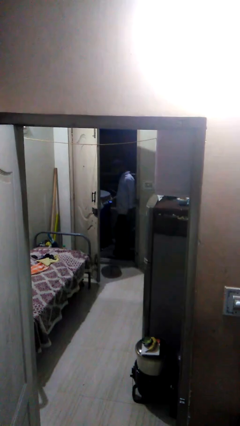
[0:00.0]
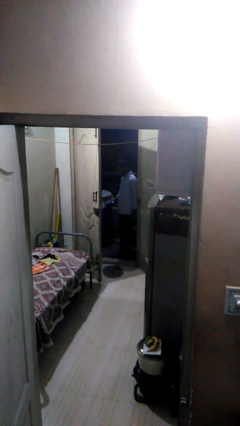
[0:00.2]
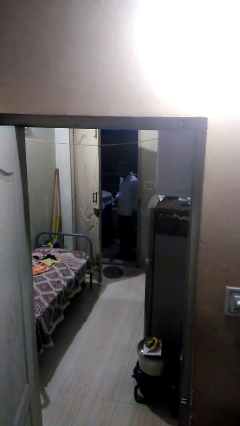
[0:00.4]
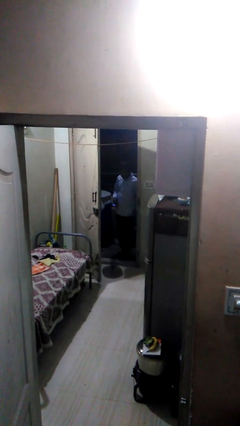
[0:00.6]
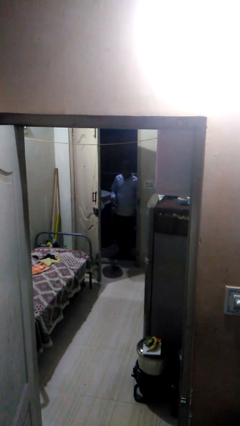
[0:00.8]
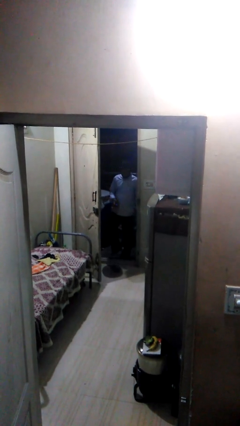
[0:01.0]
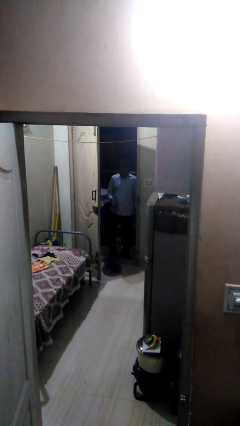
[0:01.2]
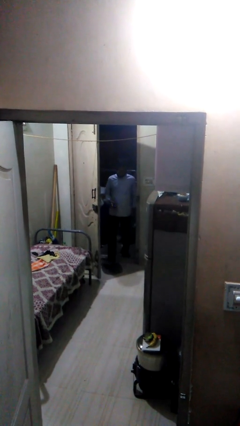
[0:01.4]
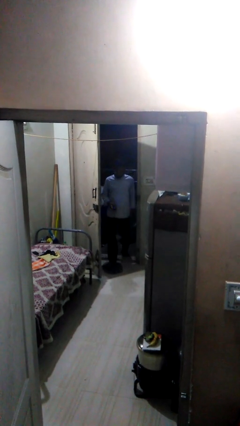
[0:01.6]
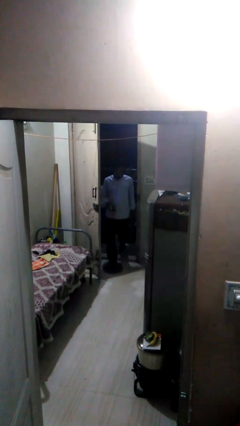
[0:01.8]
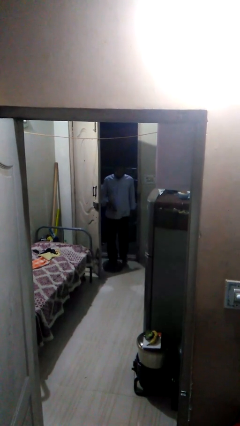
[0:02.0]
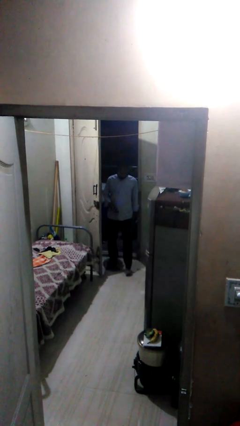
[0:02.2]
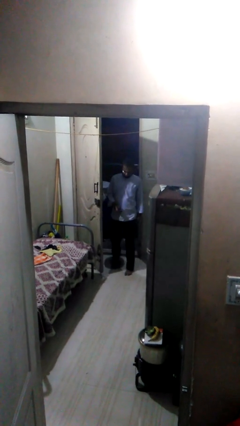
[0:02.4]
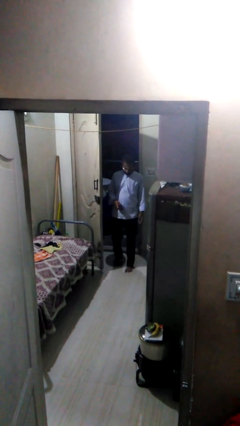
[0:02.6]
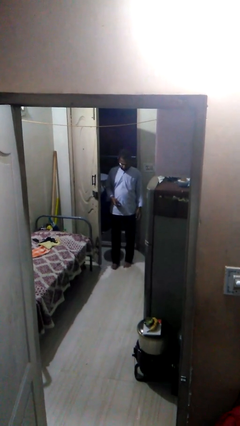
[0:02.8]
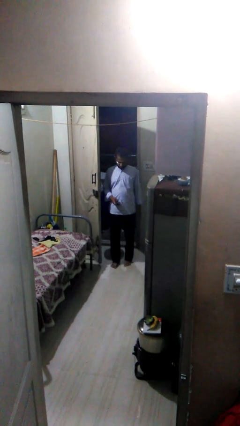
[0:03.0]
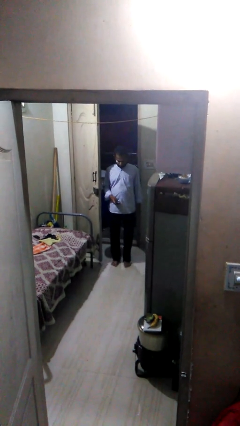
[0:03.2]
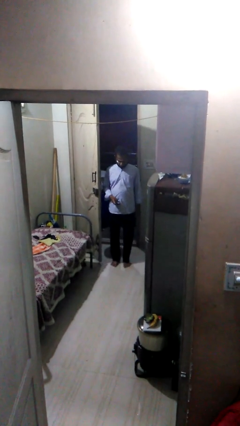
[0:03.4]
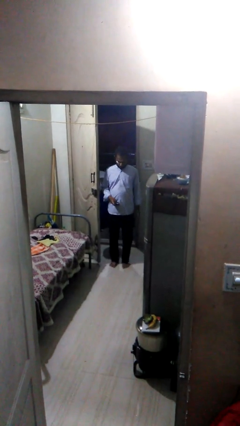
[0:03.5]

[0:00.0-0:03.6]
person enters scene through structure

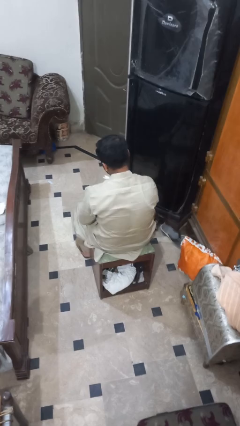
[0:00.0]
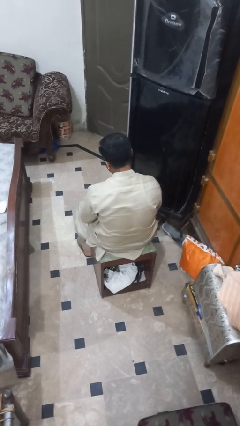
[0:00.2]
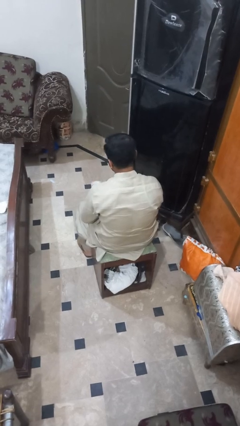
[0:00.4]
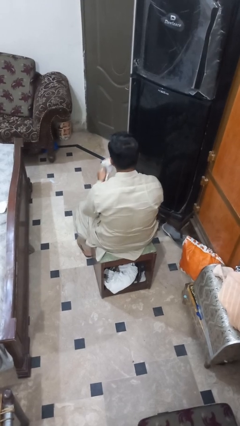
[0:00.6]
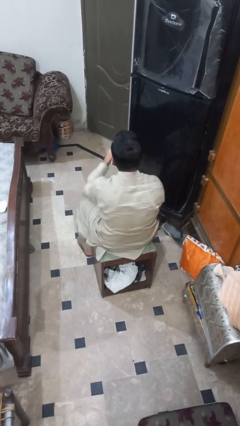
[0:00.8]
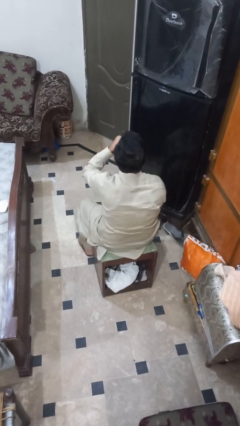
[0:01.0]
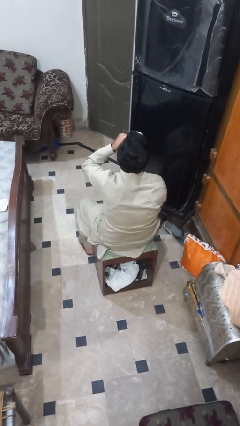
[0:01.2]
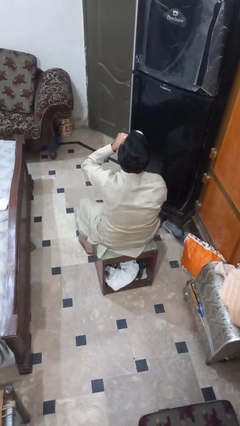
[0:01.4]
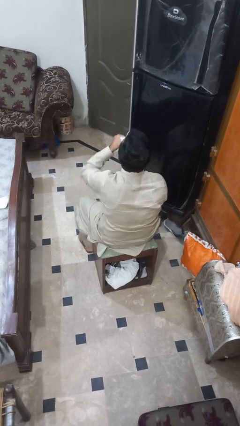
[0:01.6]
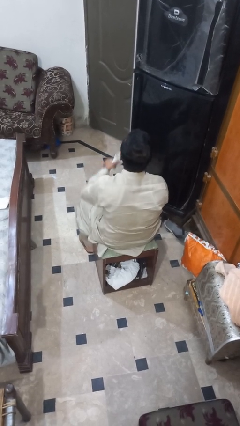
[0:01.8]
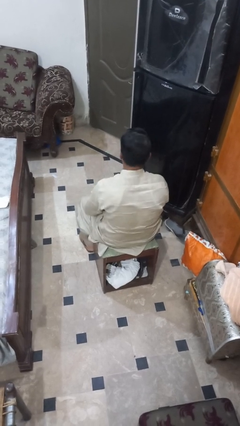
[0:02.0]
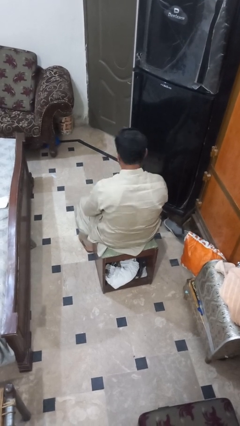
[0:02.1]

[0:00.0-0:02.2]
person drinks from mug

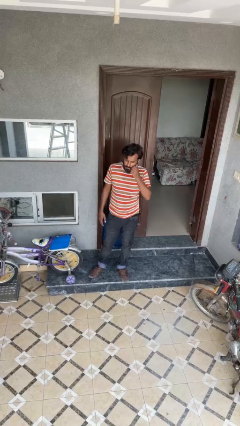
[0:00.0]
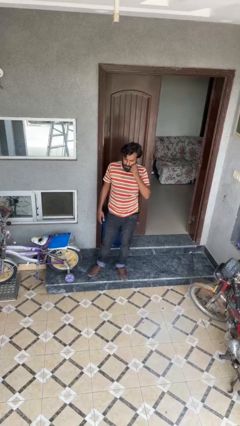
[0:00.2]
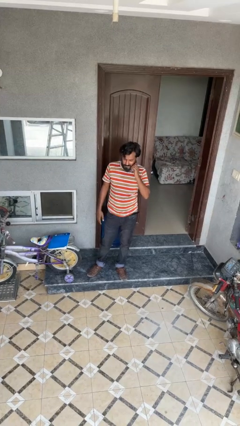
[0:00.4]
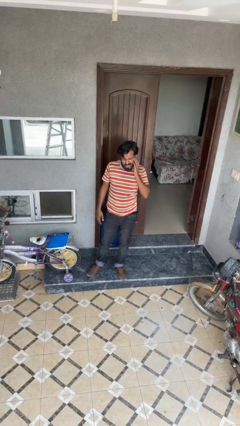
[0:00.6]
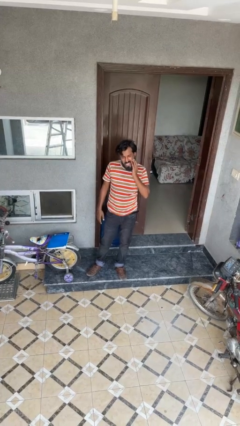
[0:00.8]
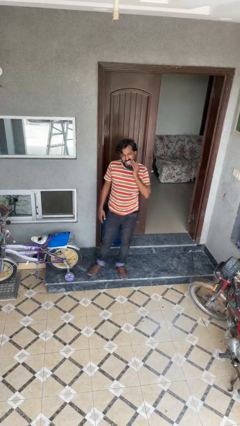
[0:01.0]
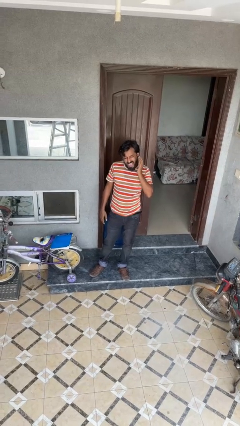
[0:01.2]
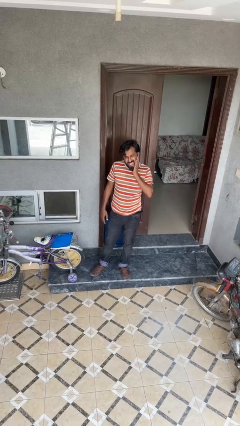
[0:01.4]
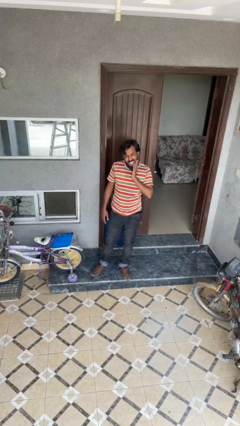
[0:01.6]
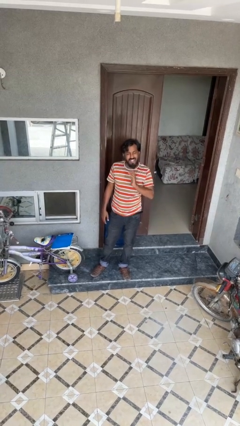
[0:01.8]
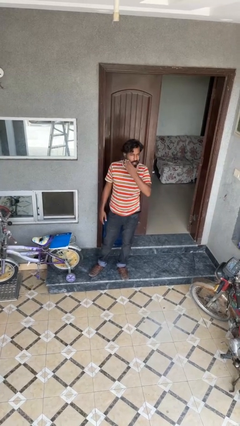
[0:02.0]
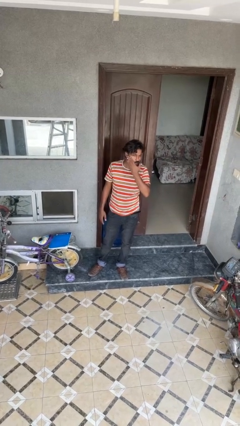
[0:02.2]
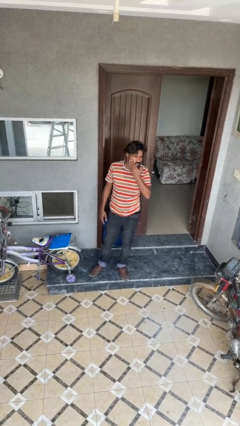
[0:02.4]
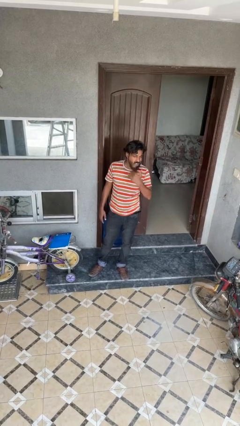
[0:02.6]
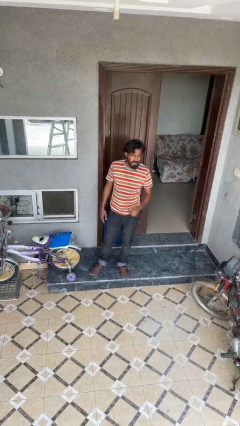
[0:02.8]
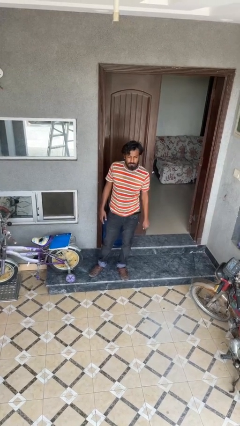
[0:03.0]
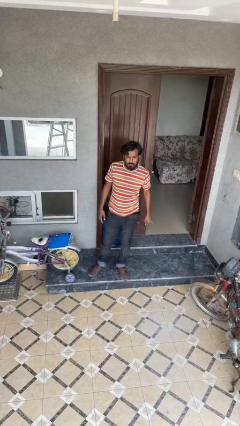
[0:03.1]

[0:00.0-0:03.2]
person scratches face

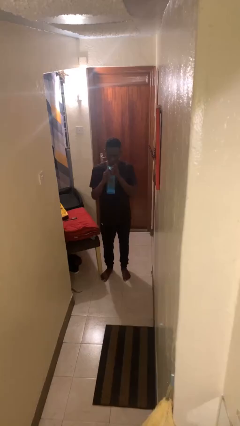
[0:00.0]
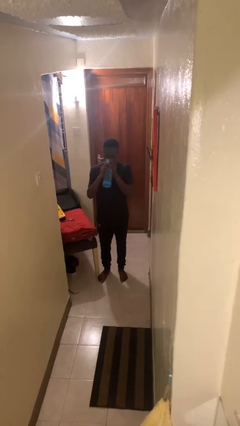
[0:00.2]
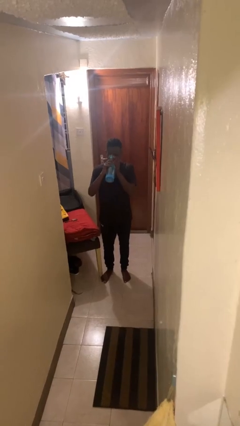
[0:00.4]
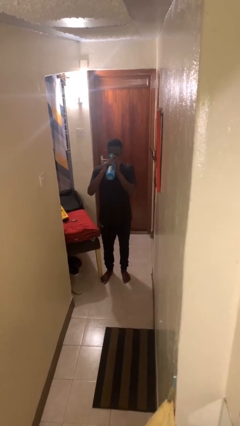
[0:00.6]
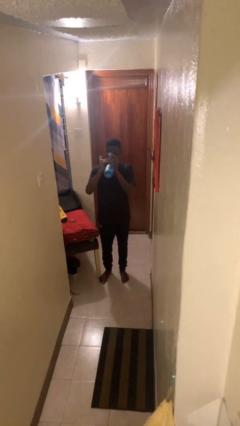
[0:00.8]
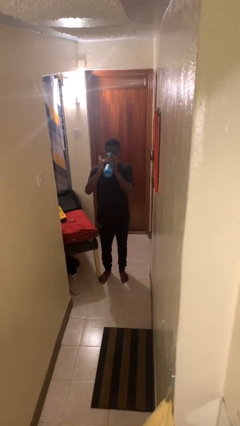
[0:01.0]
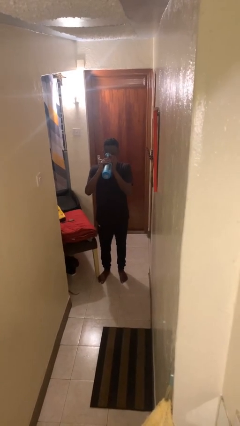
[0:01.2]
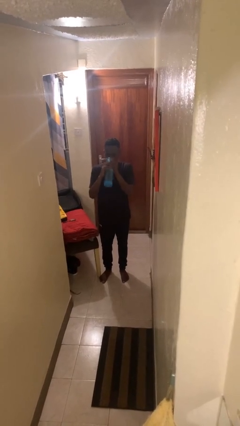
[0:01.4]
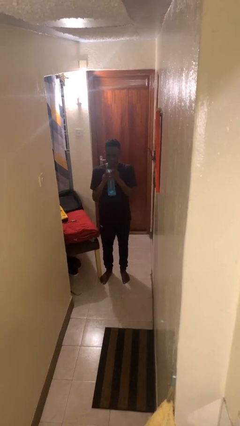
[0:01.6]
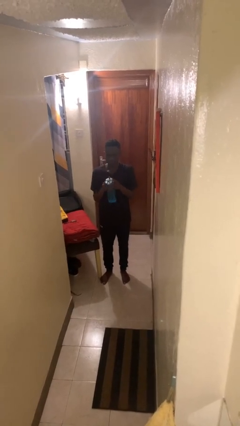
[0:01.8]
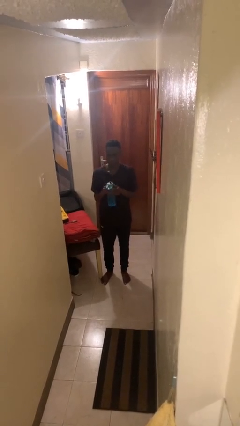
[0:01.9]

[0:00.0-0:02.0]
person drinks from bottle

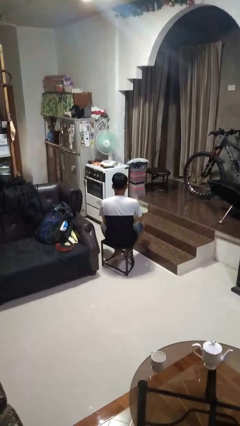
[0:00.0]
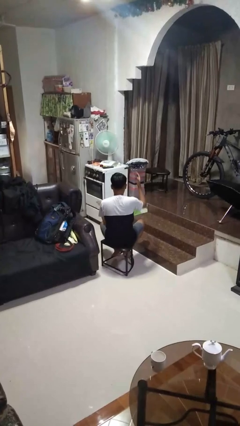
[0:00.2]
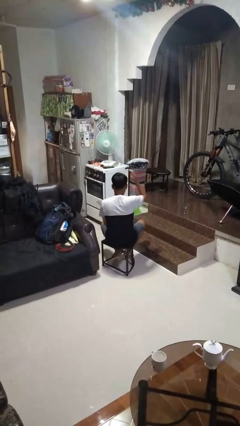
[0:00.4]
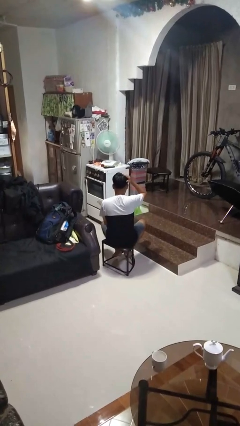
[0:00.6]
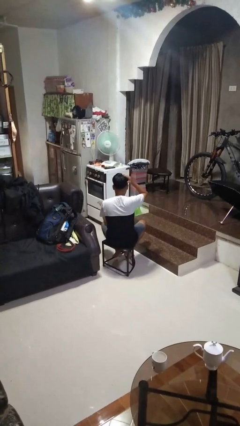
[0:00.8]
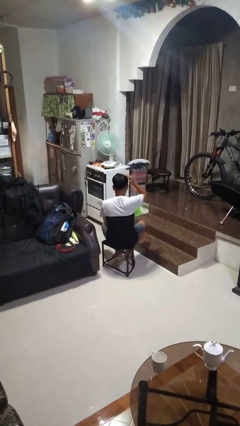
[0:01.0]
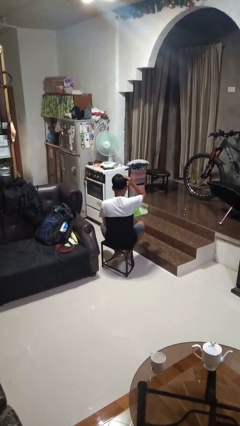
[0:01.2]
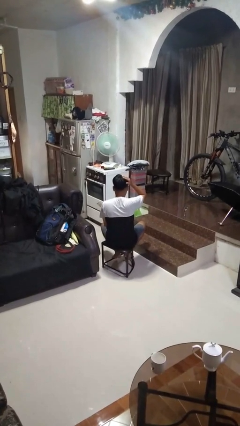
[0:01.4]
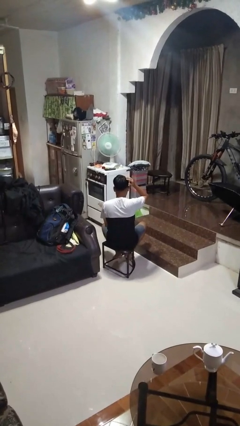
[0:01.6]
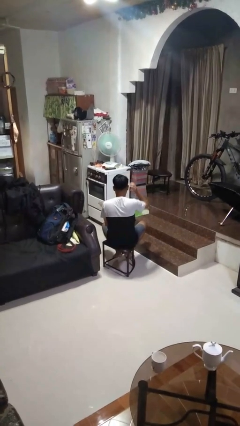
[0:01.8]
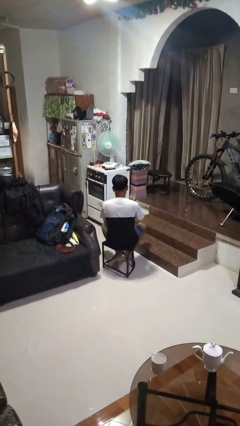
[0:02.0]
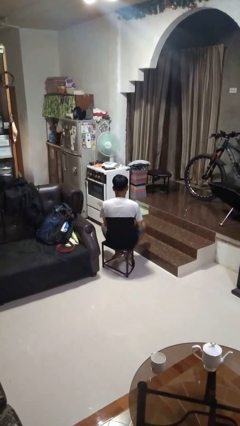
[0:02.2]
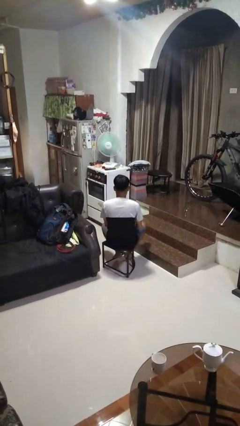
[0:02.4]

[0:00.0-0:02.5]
person pats head

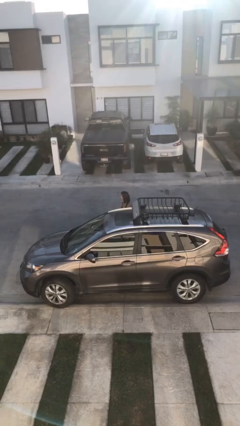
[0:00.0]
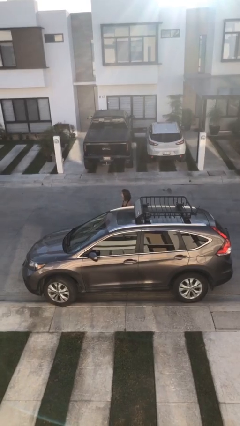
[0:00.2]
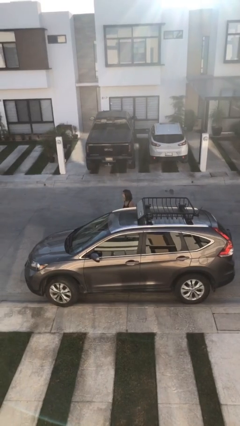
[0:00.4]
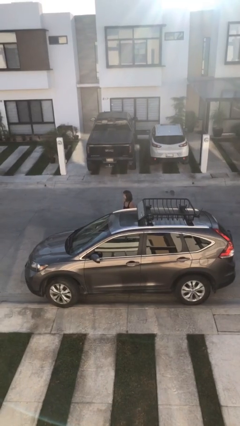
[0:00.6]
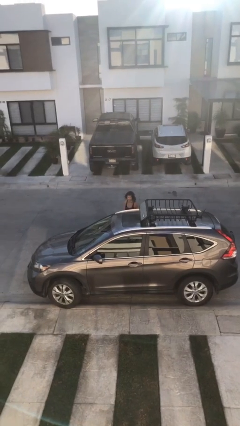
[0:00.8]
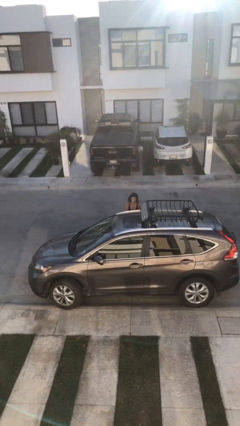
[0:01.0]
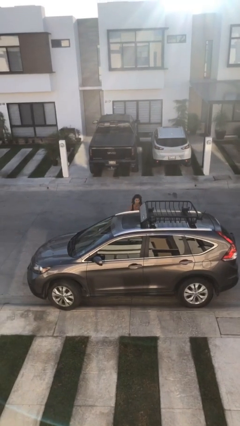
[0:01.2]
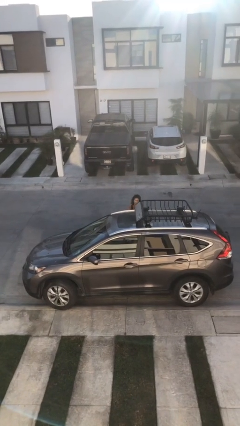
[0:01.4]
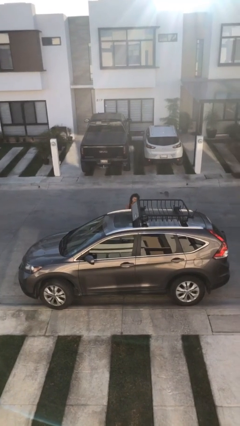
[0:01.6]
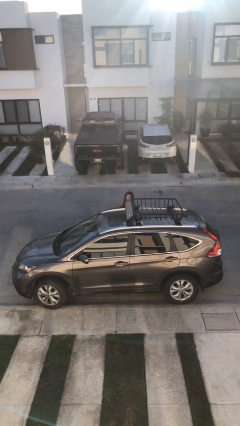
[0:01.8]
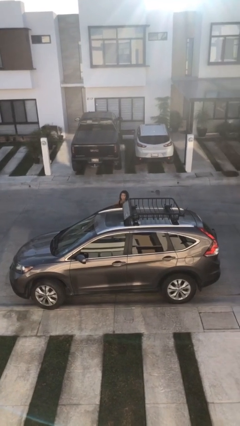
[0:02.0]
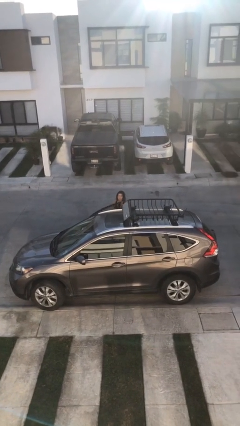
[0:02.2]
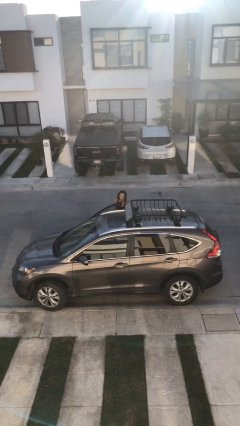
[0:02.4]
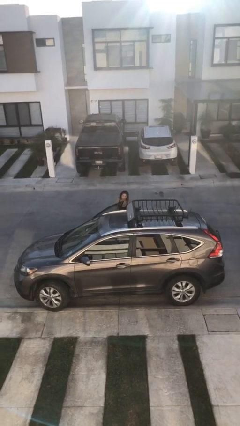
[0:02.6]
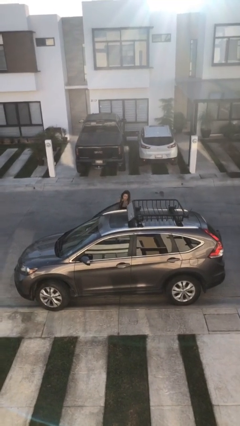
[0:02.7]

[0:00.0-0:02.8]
person closes car door

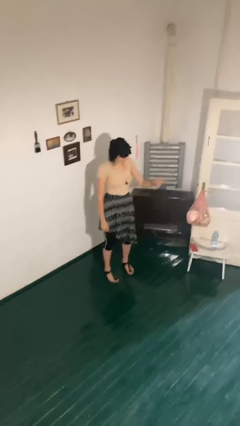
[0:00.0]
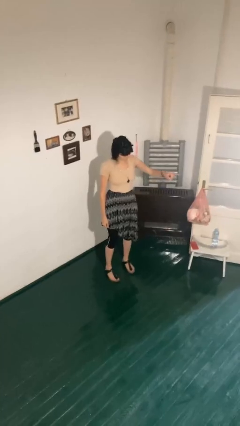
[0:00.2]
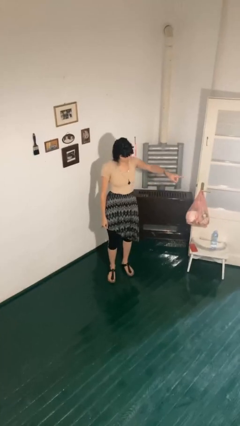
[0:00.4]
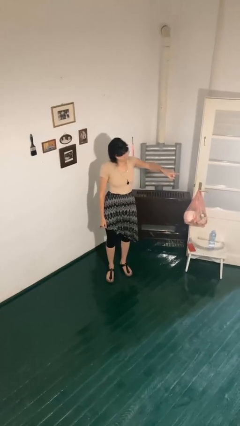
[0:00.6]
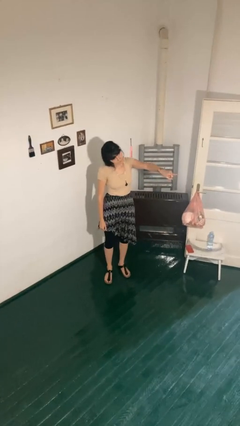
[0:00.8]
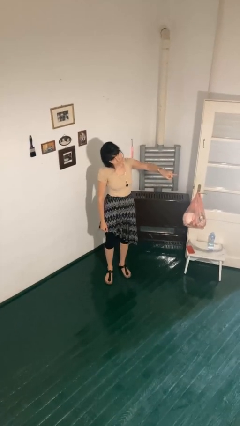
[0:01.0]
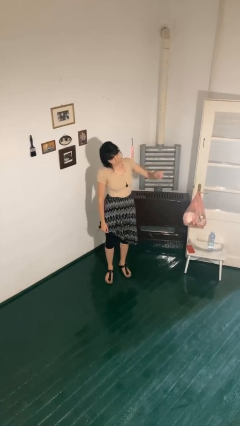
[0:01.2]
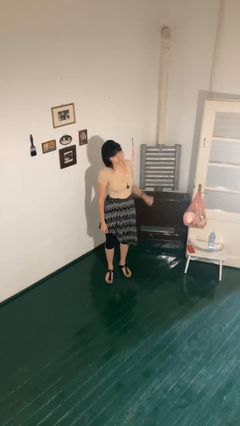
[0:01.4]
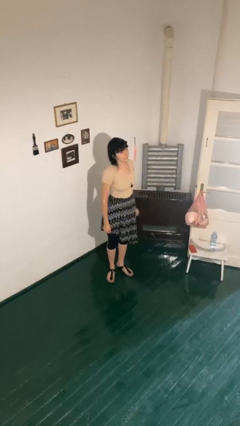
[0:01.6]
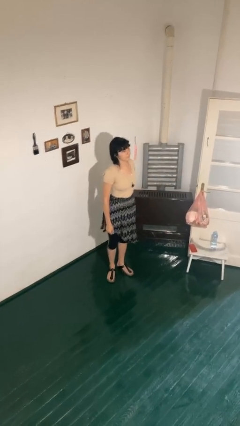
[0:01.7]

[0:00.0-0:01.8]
person points at person
